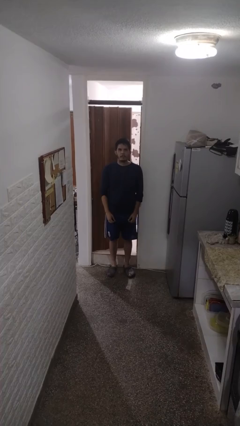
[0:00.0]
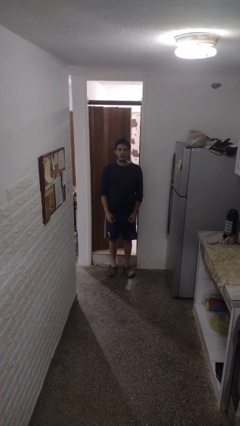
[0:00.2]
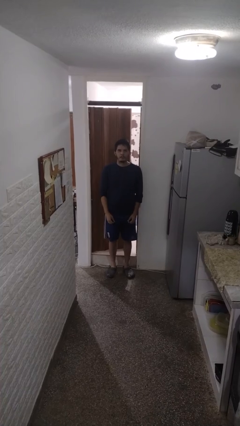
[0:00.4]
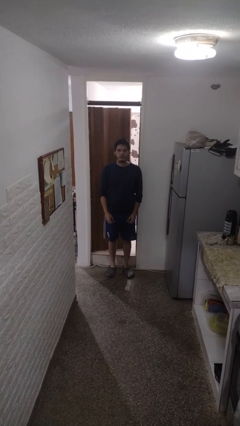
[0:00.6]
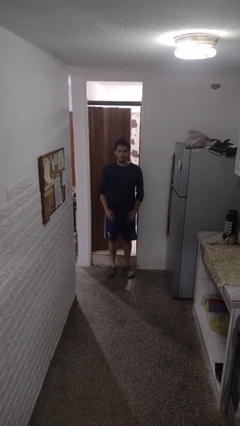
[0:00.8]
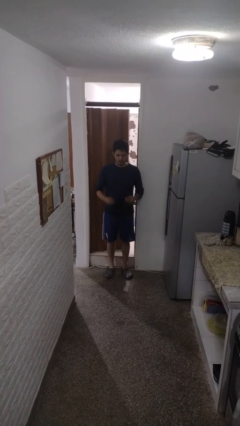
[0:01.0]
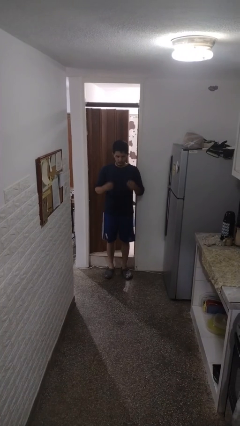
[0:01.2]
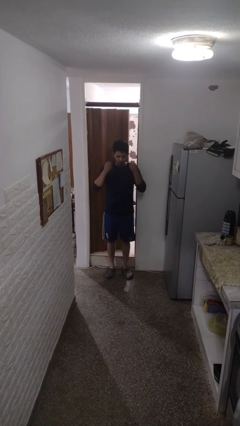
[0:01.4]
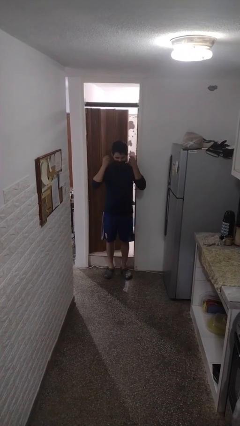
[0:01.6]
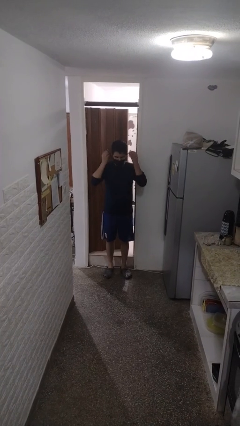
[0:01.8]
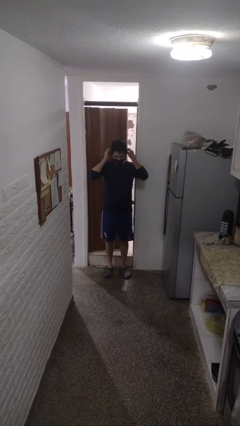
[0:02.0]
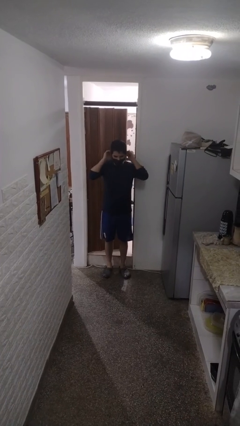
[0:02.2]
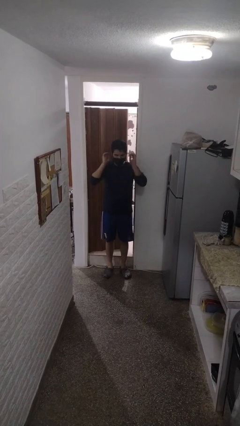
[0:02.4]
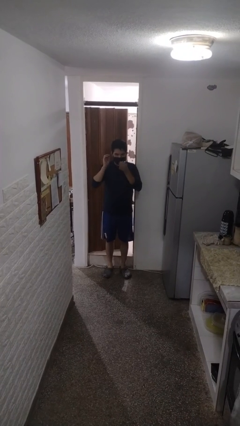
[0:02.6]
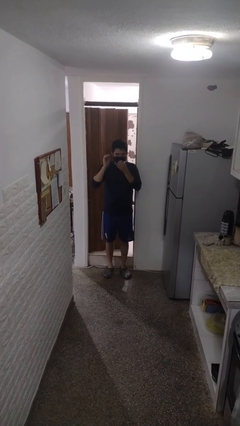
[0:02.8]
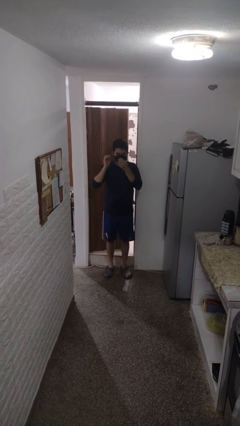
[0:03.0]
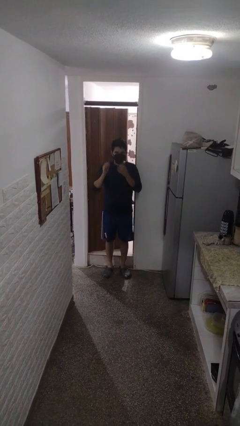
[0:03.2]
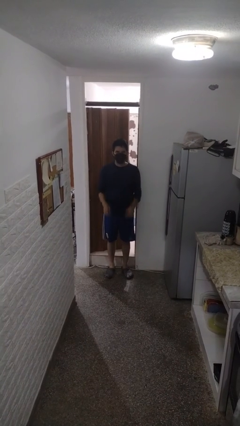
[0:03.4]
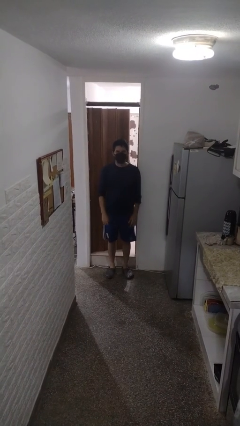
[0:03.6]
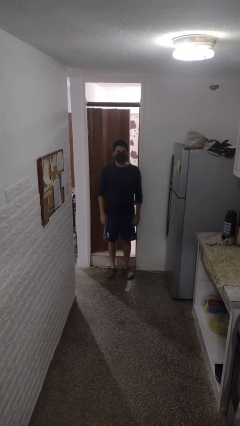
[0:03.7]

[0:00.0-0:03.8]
person puts on facemask

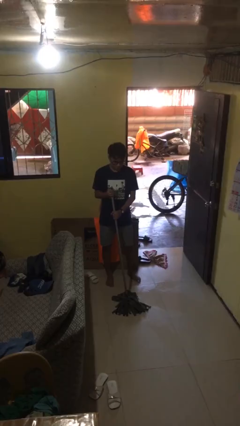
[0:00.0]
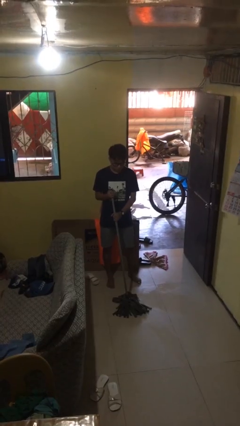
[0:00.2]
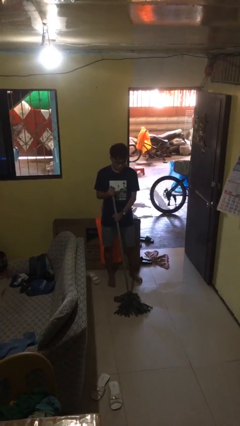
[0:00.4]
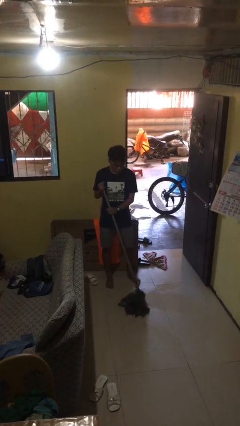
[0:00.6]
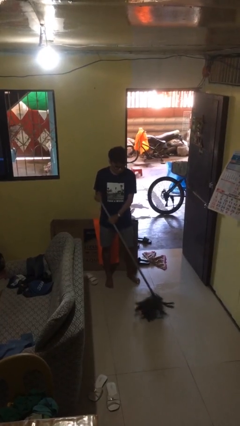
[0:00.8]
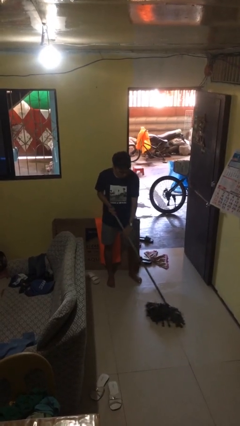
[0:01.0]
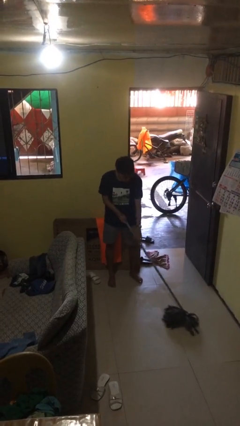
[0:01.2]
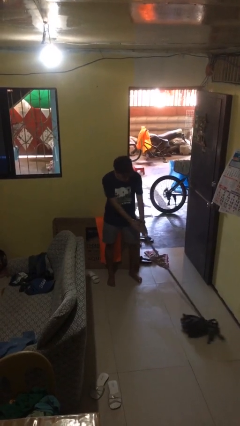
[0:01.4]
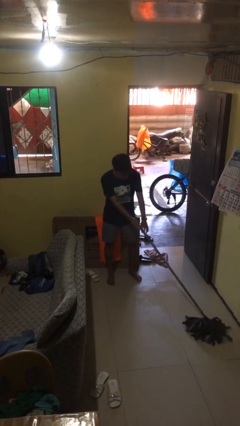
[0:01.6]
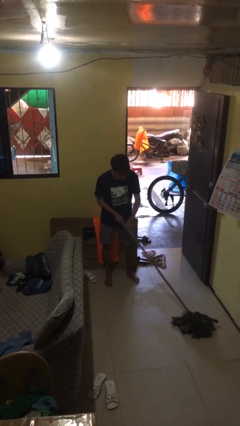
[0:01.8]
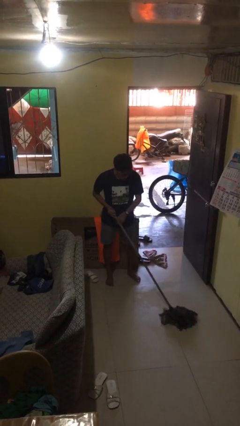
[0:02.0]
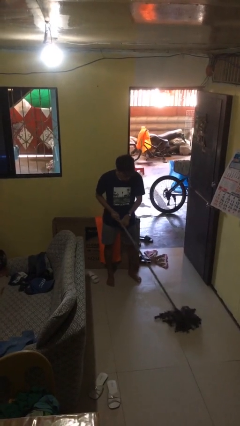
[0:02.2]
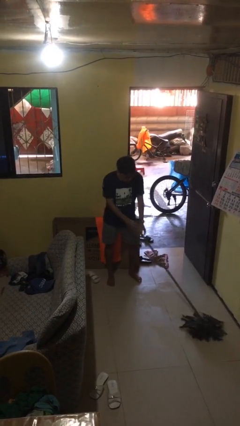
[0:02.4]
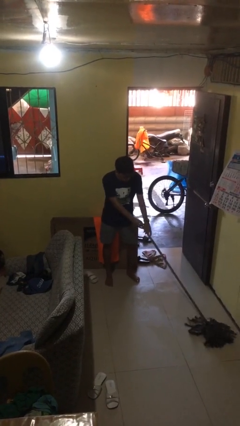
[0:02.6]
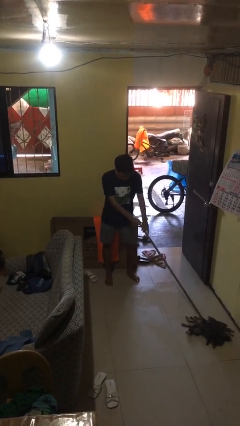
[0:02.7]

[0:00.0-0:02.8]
person mops

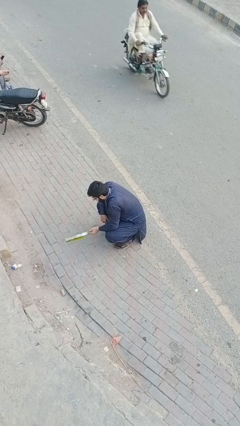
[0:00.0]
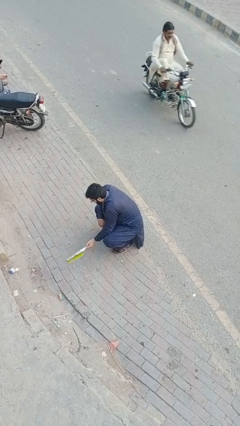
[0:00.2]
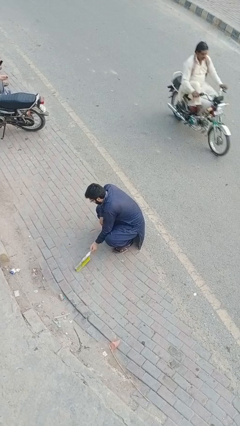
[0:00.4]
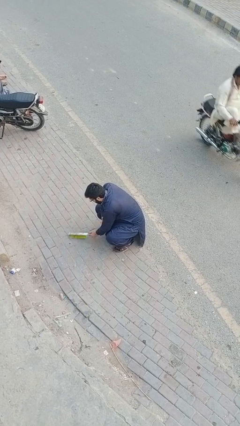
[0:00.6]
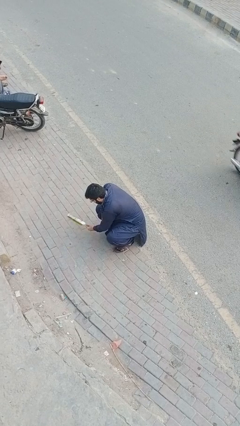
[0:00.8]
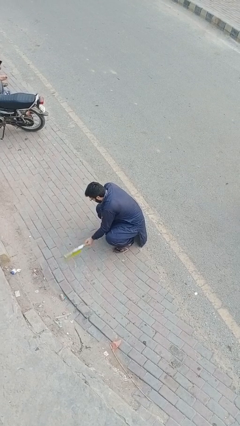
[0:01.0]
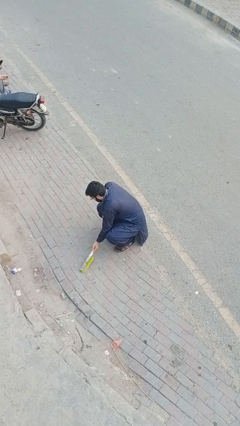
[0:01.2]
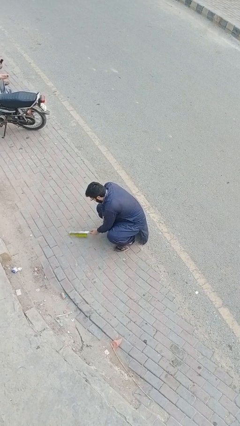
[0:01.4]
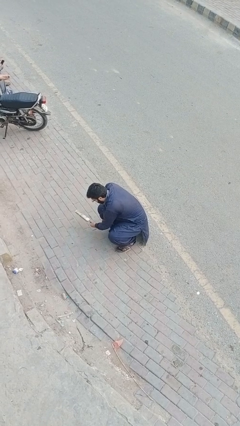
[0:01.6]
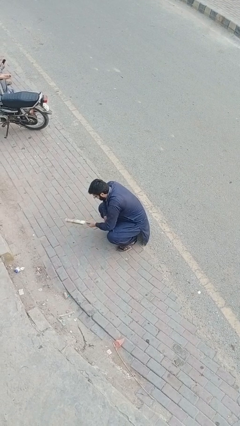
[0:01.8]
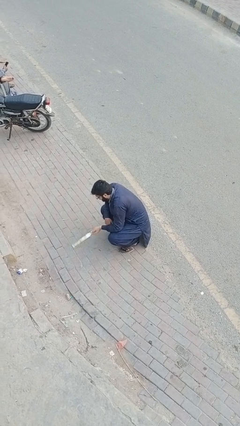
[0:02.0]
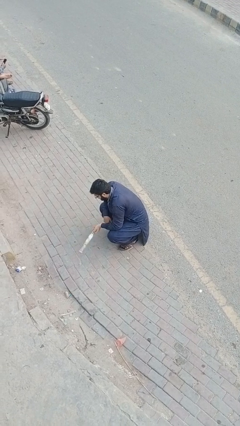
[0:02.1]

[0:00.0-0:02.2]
person sweeps floor

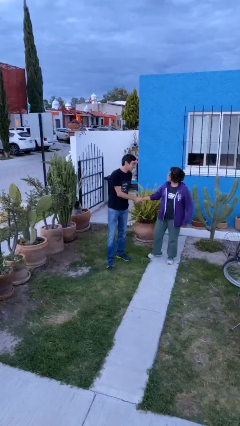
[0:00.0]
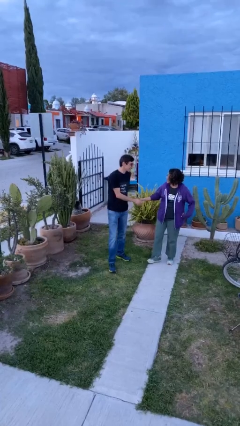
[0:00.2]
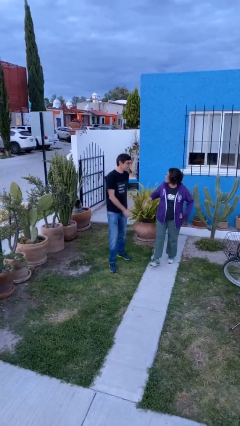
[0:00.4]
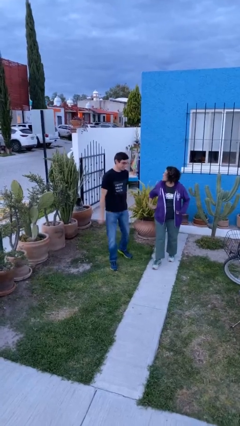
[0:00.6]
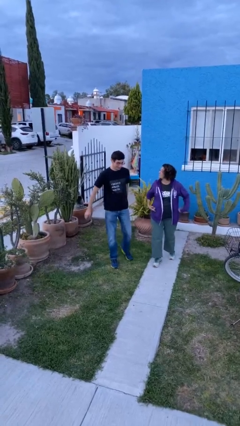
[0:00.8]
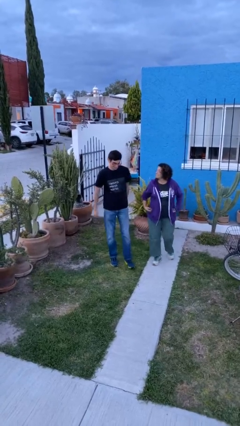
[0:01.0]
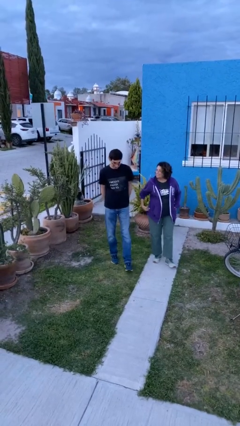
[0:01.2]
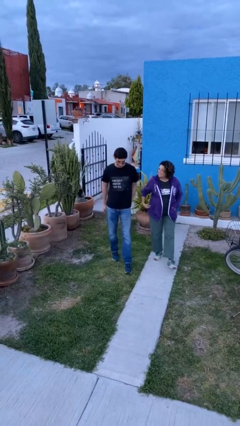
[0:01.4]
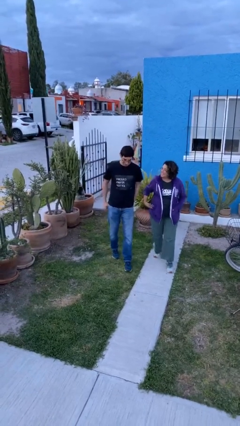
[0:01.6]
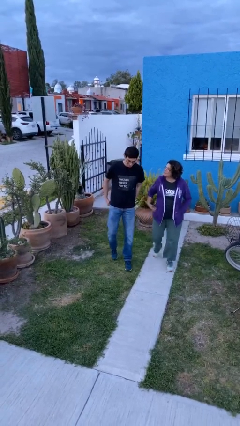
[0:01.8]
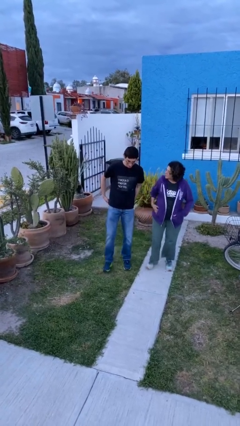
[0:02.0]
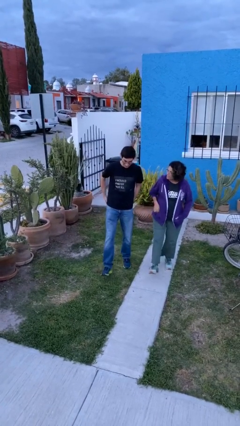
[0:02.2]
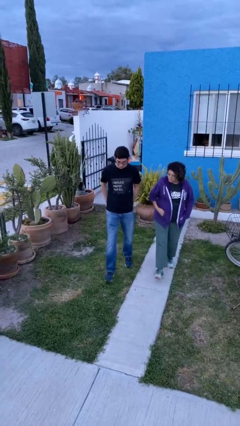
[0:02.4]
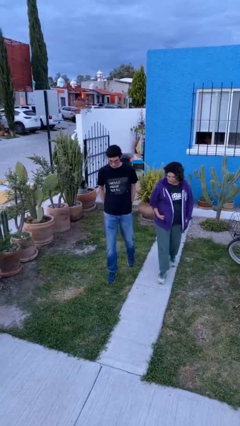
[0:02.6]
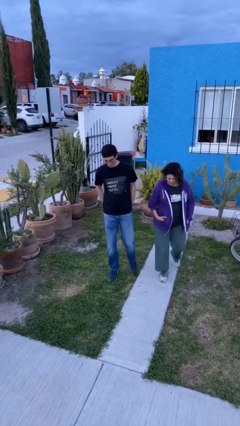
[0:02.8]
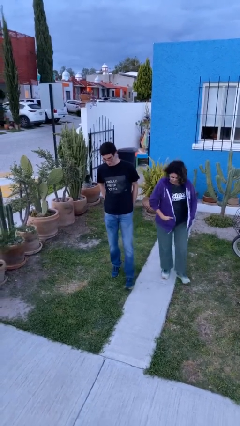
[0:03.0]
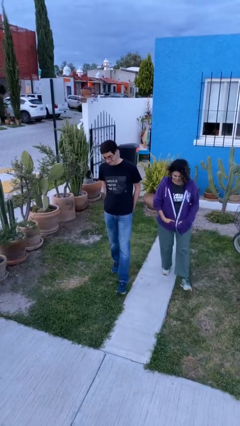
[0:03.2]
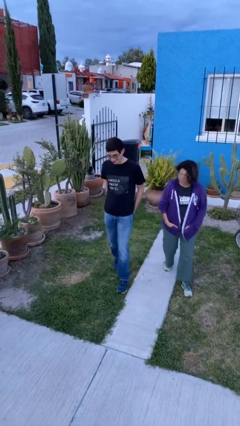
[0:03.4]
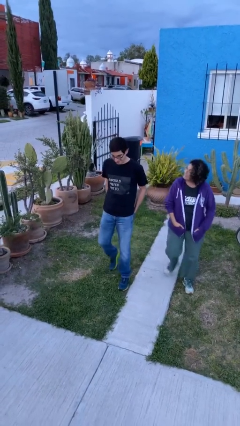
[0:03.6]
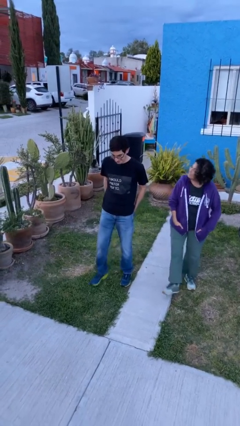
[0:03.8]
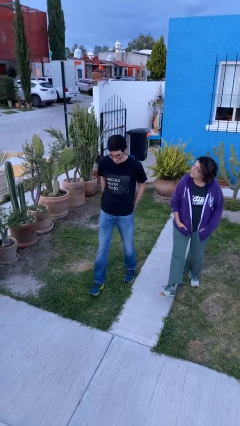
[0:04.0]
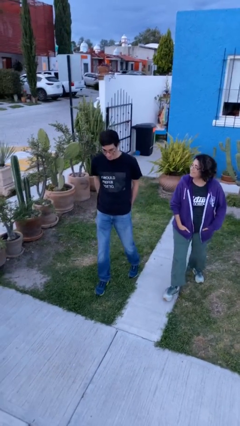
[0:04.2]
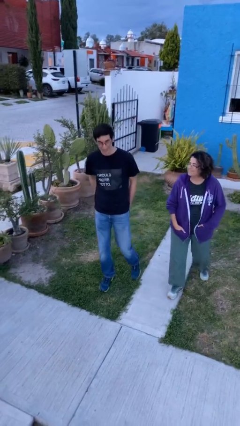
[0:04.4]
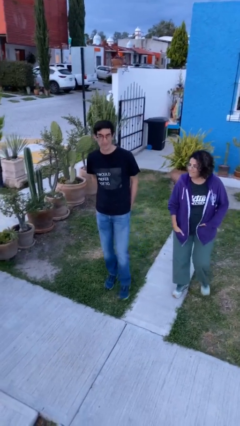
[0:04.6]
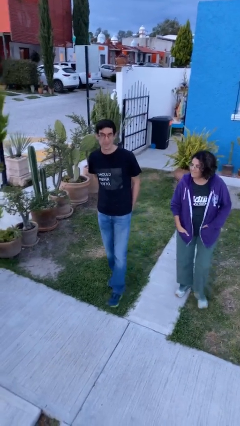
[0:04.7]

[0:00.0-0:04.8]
person talks to person

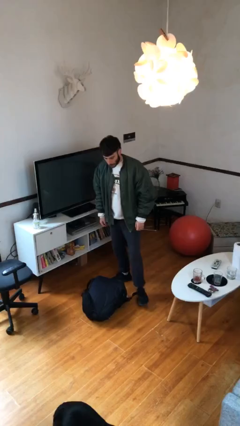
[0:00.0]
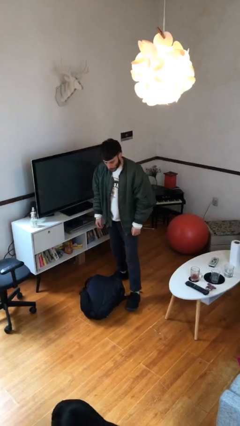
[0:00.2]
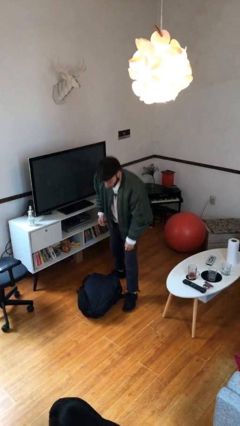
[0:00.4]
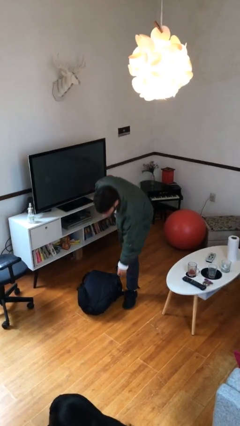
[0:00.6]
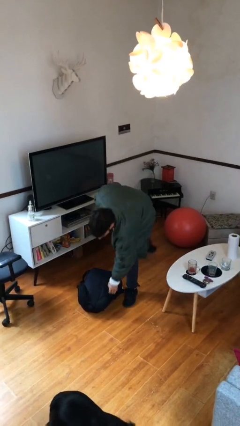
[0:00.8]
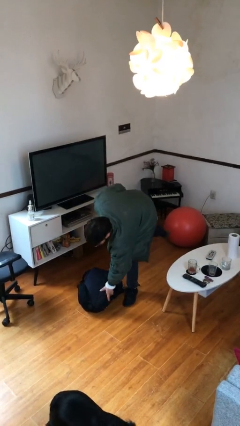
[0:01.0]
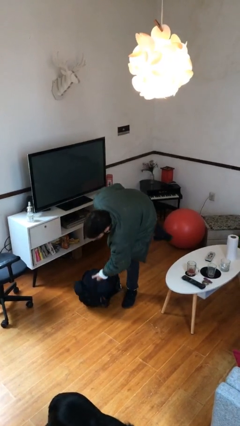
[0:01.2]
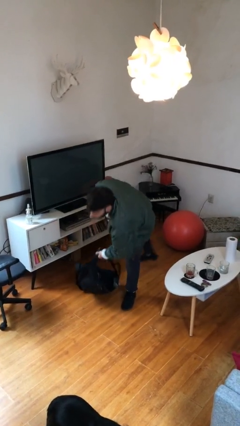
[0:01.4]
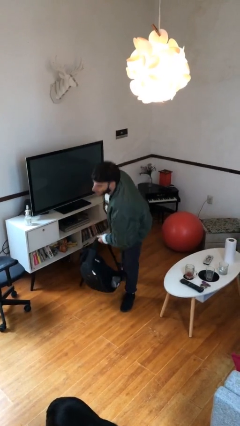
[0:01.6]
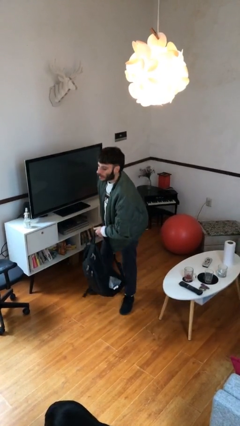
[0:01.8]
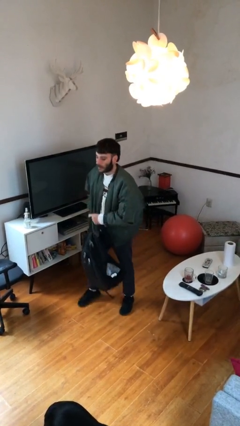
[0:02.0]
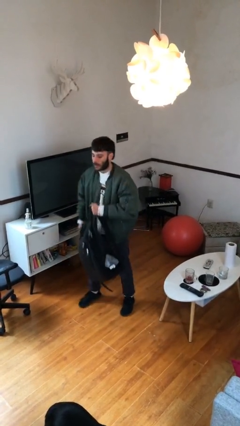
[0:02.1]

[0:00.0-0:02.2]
person picks up object from floor

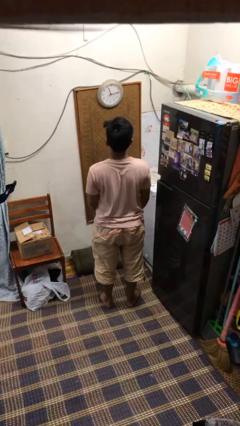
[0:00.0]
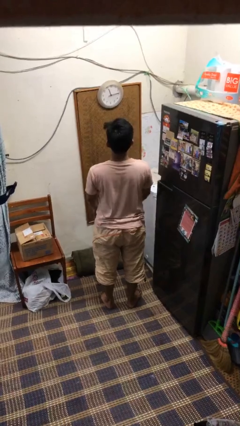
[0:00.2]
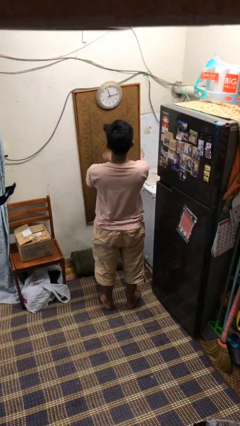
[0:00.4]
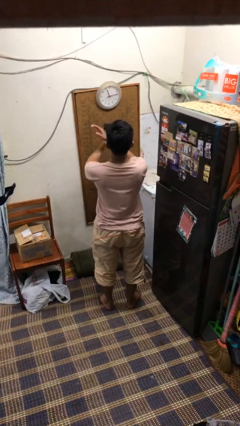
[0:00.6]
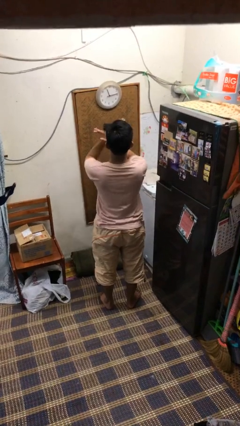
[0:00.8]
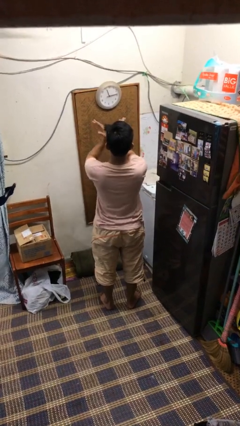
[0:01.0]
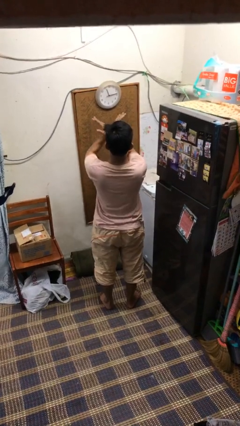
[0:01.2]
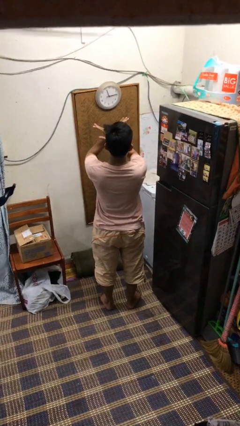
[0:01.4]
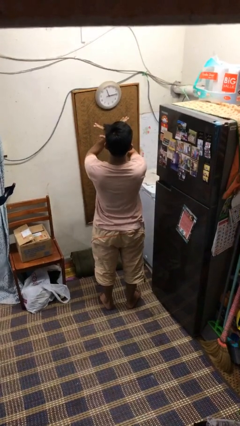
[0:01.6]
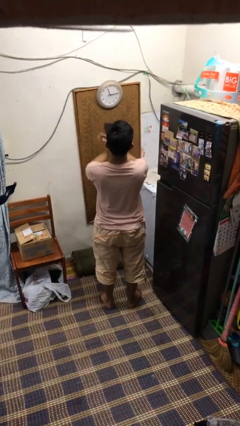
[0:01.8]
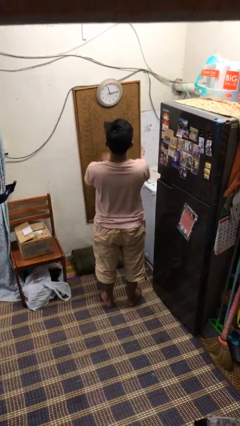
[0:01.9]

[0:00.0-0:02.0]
person gestures arms x
